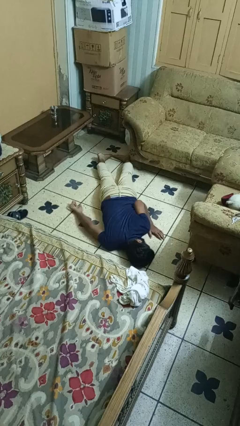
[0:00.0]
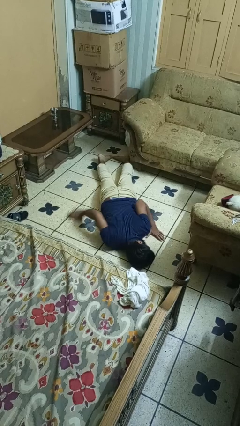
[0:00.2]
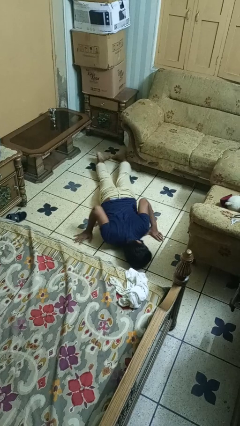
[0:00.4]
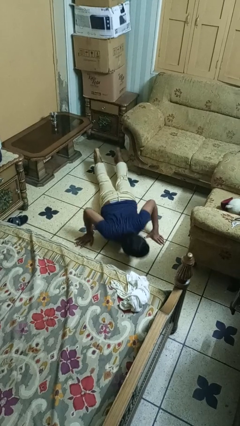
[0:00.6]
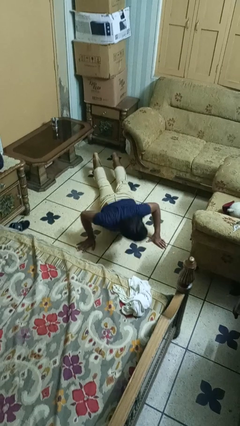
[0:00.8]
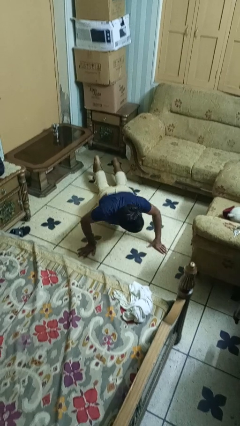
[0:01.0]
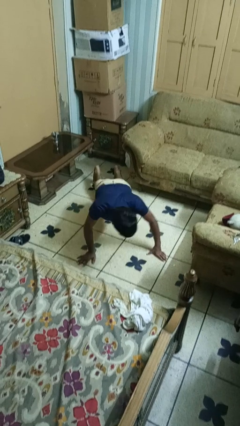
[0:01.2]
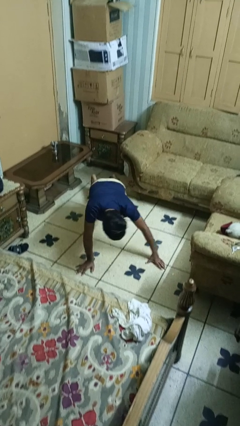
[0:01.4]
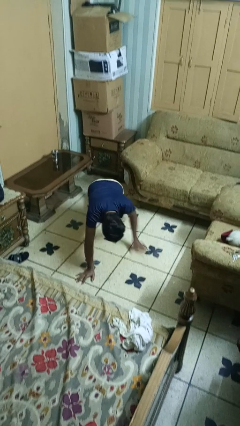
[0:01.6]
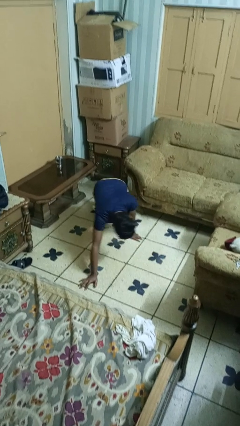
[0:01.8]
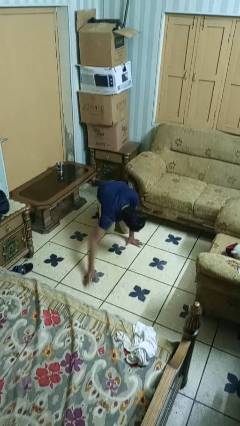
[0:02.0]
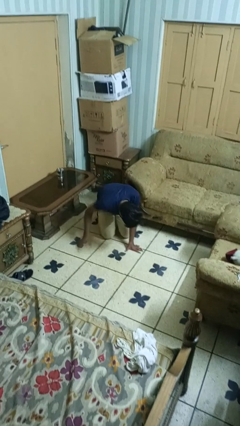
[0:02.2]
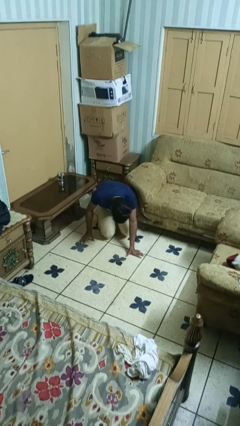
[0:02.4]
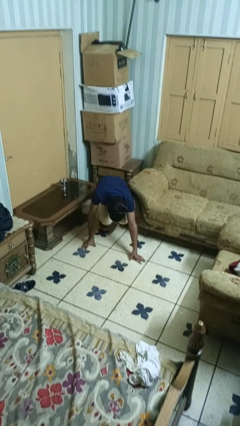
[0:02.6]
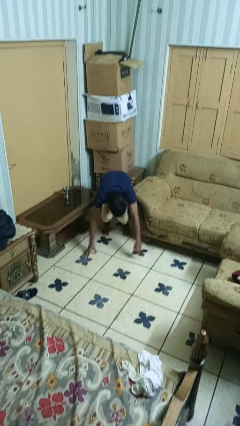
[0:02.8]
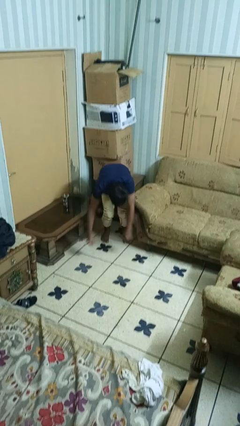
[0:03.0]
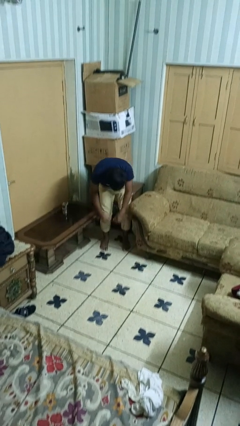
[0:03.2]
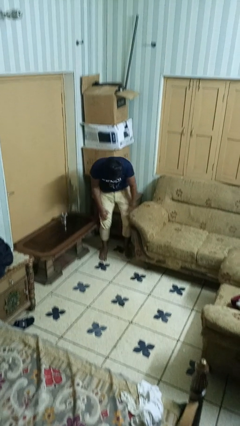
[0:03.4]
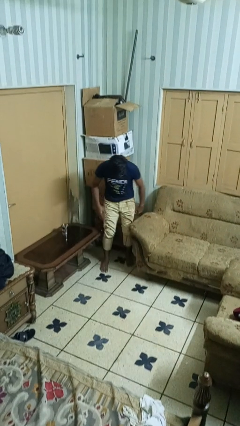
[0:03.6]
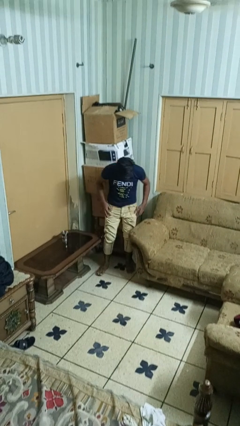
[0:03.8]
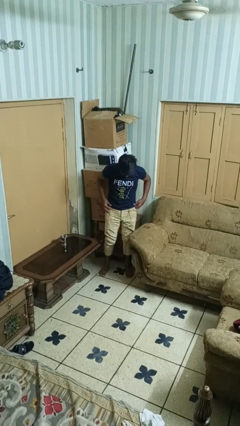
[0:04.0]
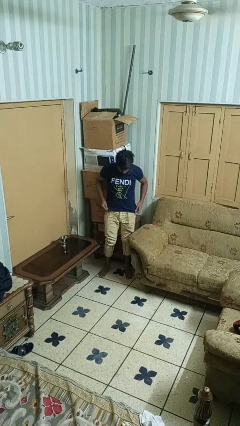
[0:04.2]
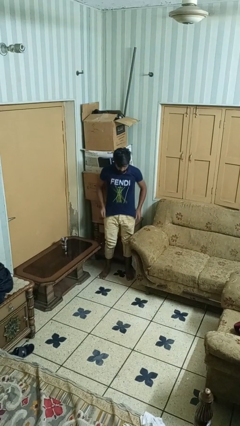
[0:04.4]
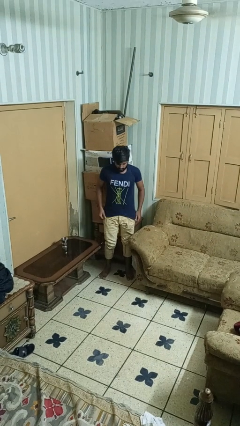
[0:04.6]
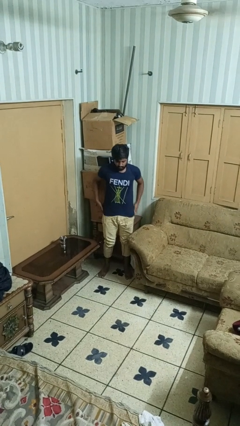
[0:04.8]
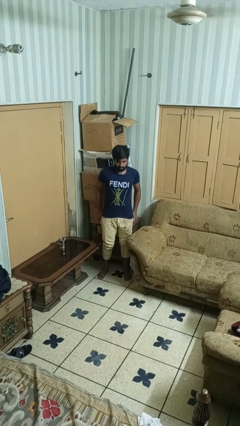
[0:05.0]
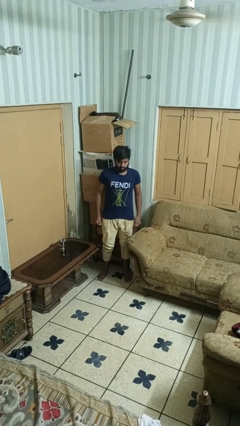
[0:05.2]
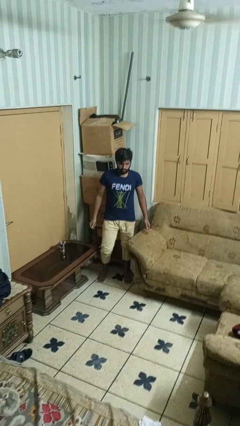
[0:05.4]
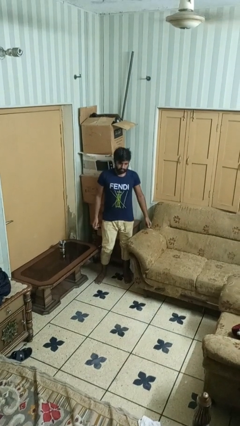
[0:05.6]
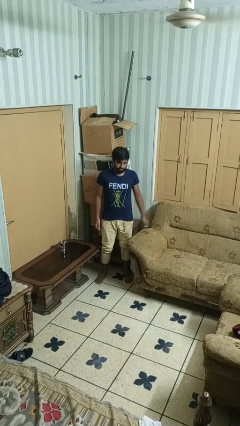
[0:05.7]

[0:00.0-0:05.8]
person stands up from floor

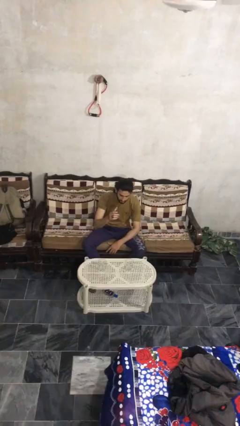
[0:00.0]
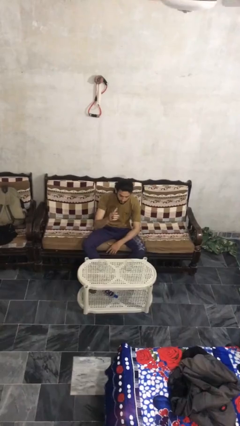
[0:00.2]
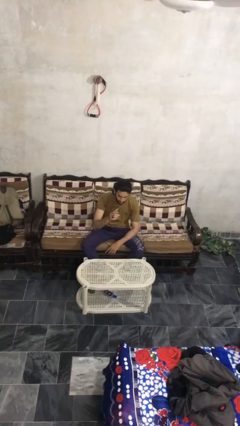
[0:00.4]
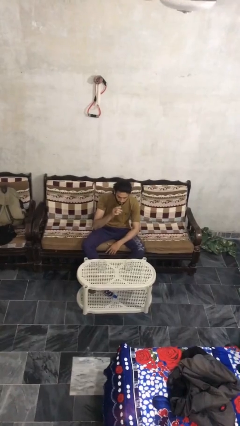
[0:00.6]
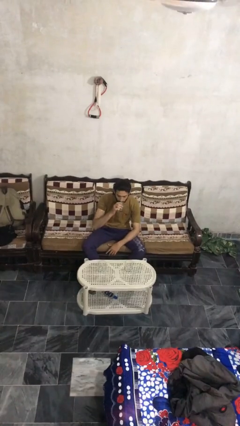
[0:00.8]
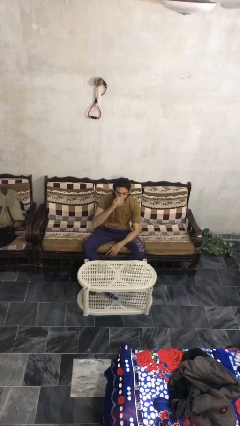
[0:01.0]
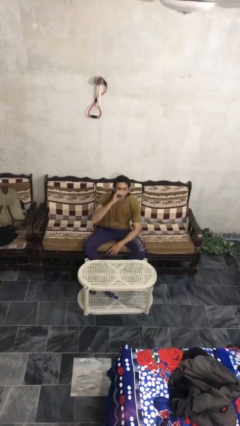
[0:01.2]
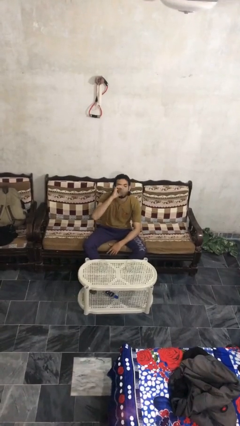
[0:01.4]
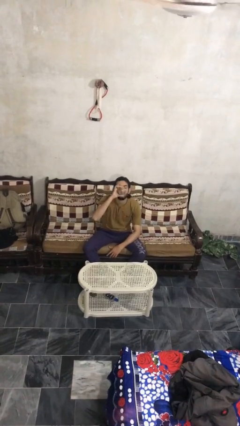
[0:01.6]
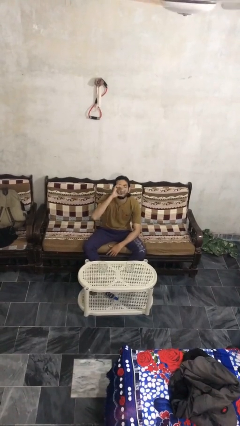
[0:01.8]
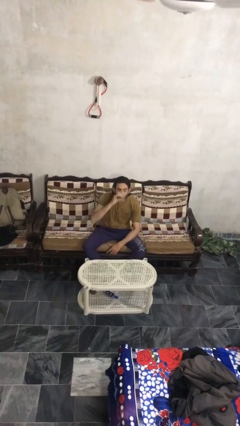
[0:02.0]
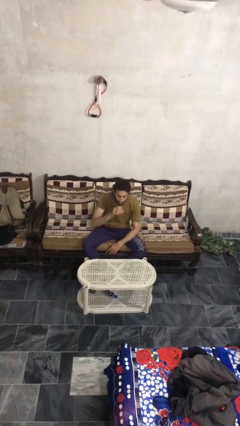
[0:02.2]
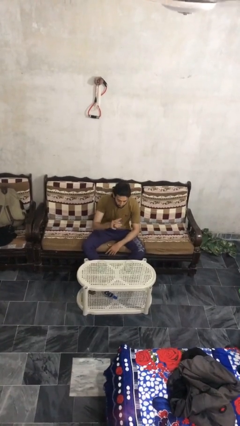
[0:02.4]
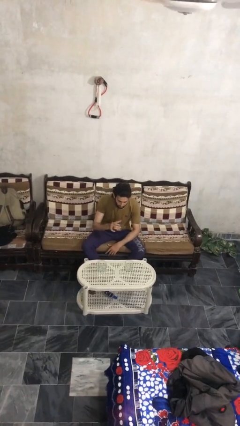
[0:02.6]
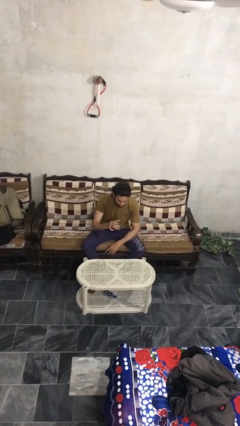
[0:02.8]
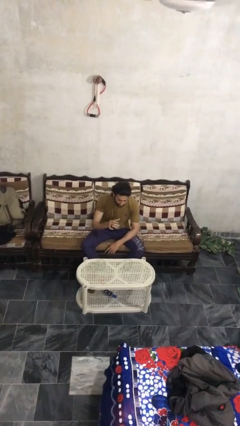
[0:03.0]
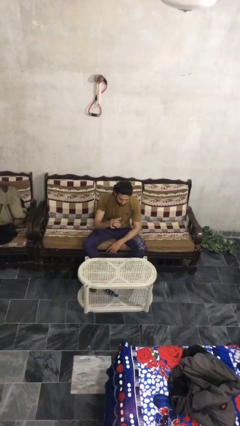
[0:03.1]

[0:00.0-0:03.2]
person drinks from shotglass

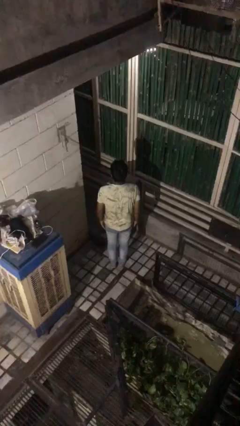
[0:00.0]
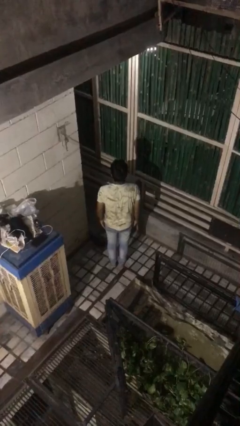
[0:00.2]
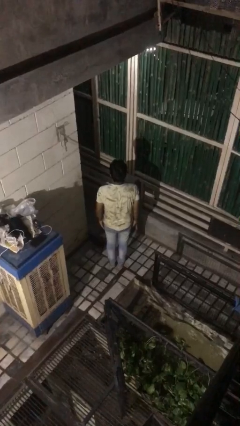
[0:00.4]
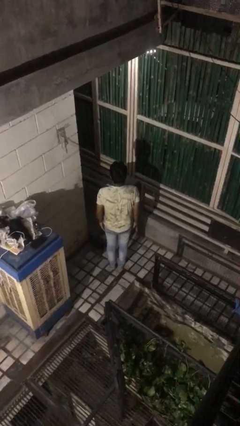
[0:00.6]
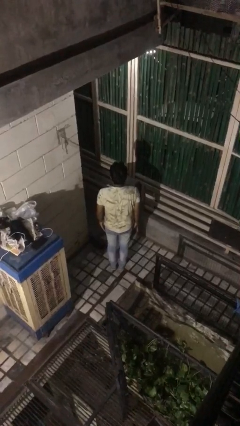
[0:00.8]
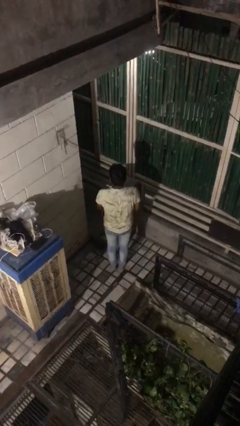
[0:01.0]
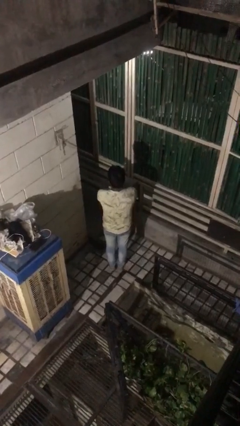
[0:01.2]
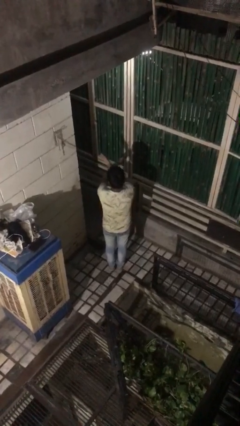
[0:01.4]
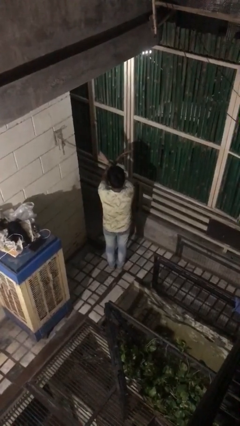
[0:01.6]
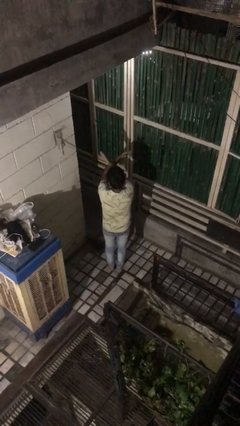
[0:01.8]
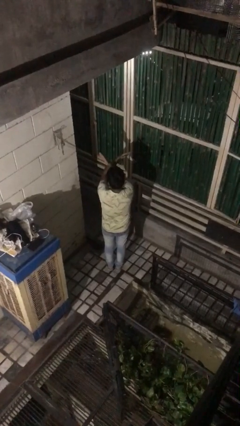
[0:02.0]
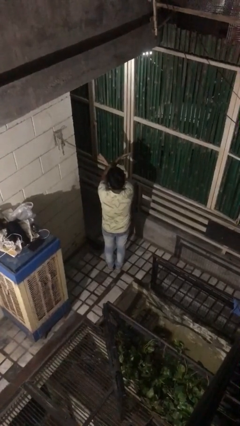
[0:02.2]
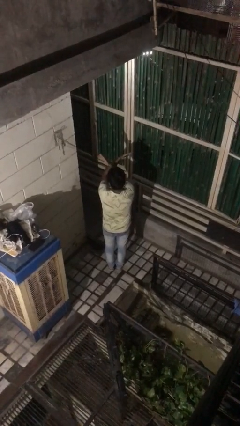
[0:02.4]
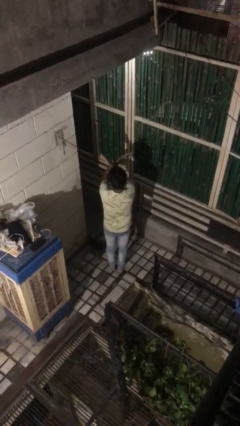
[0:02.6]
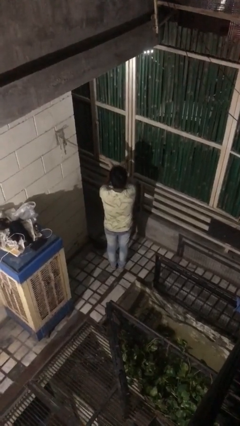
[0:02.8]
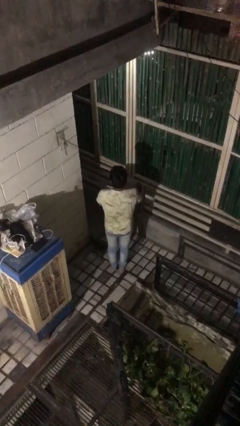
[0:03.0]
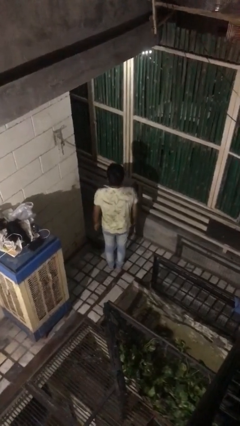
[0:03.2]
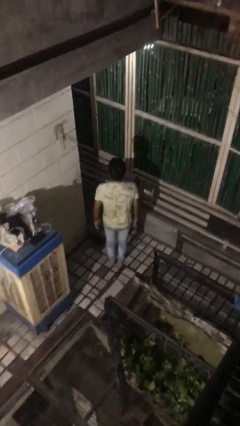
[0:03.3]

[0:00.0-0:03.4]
person gestures arms x

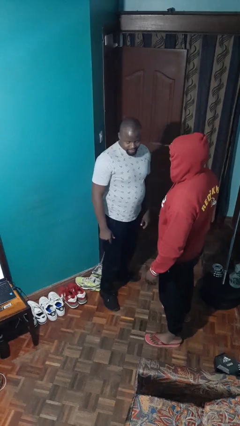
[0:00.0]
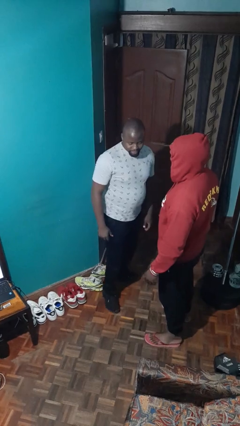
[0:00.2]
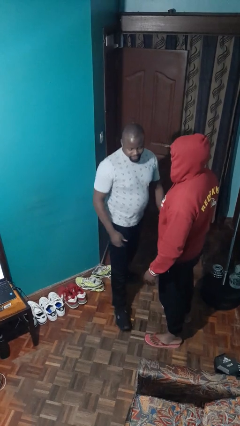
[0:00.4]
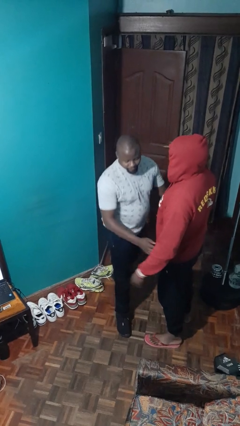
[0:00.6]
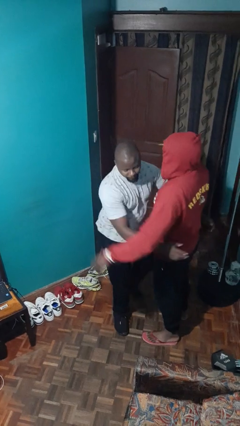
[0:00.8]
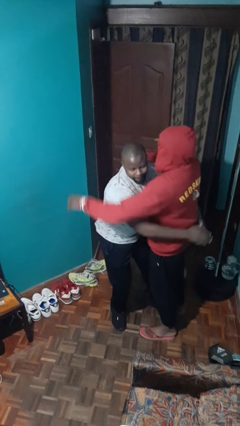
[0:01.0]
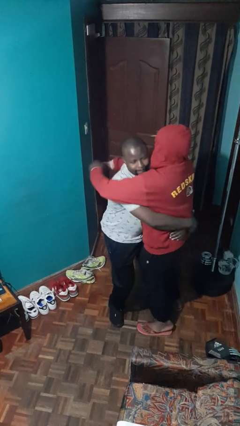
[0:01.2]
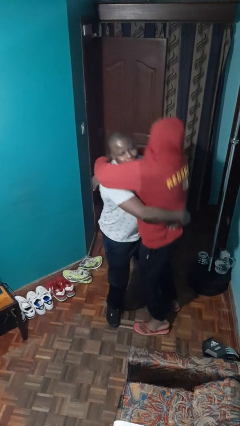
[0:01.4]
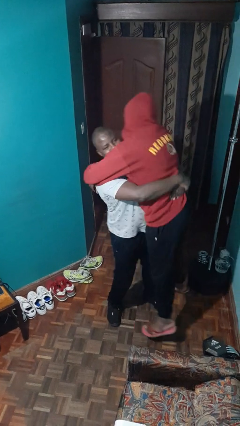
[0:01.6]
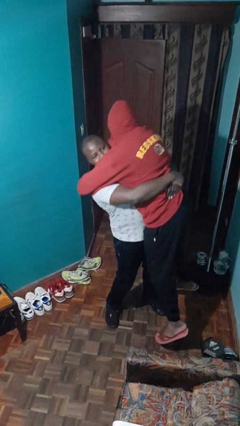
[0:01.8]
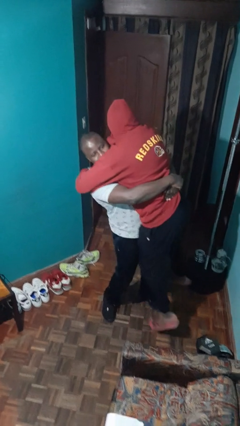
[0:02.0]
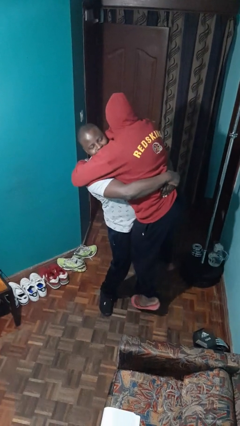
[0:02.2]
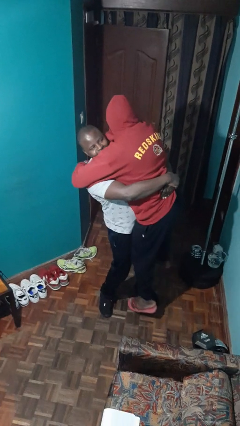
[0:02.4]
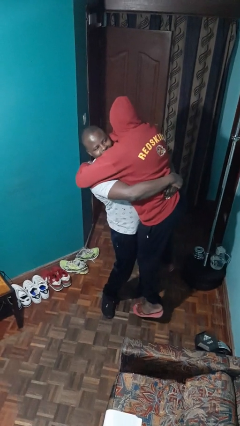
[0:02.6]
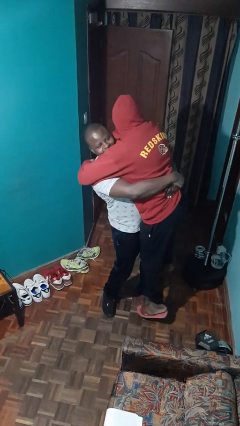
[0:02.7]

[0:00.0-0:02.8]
person picks up person

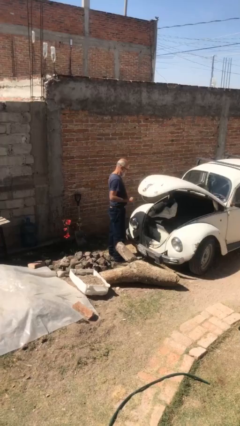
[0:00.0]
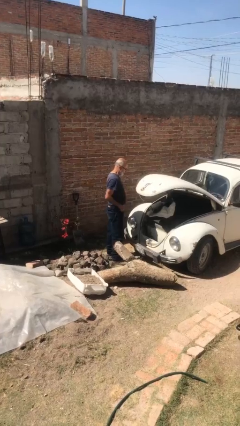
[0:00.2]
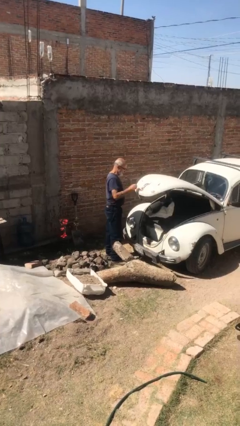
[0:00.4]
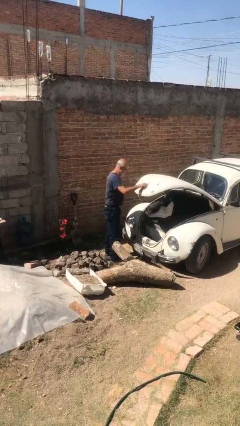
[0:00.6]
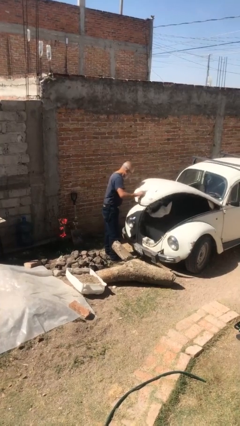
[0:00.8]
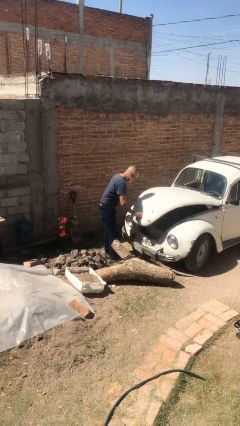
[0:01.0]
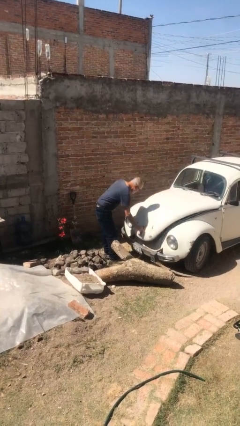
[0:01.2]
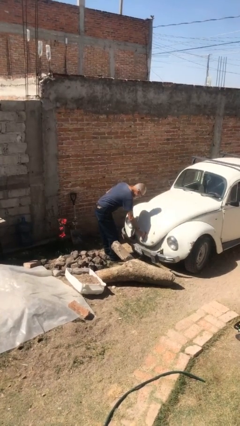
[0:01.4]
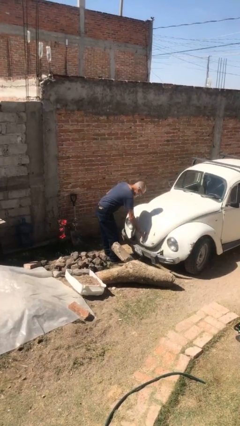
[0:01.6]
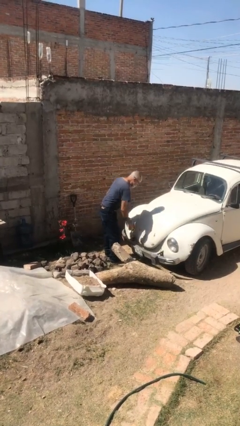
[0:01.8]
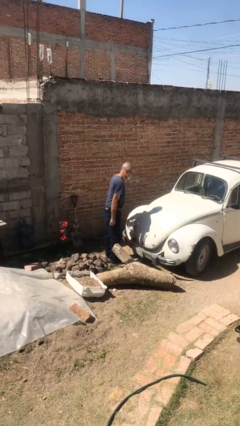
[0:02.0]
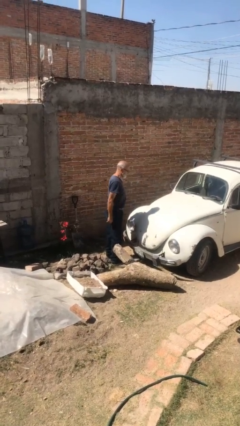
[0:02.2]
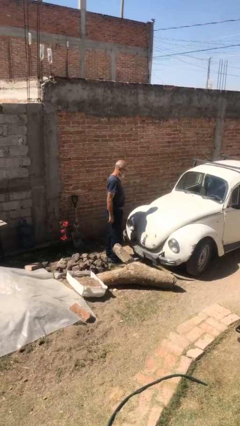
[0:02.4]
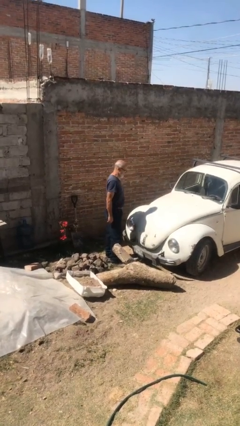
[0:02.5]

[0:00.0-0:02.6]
person closes car trunk
